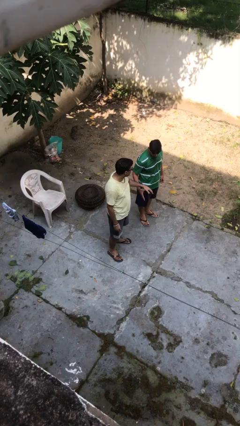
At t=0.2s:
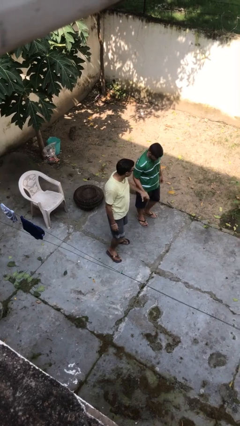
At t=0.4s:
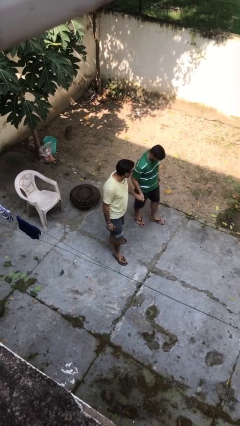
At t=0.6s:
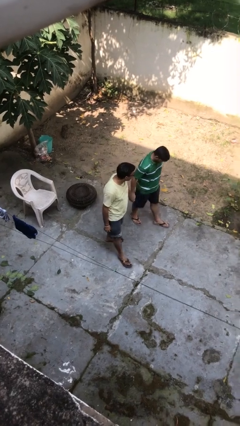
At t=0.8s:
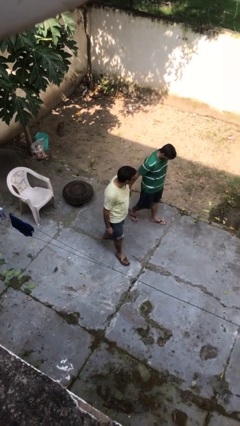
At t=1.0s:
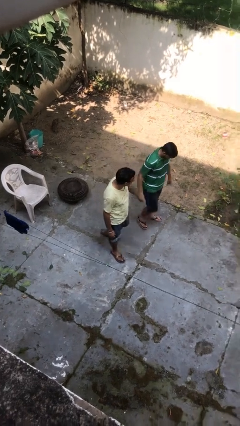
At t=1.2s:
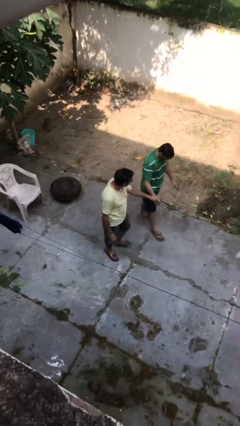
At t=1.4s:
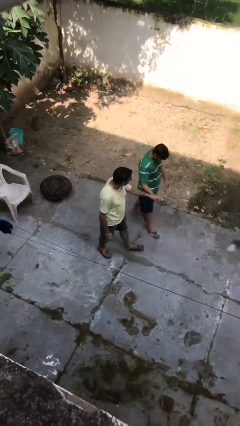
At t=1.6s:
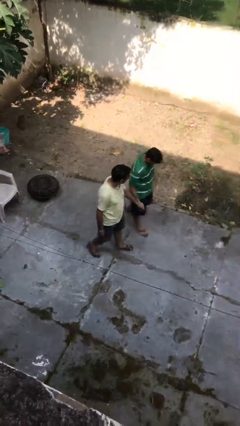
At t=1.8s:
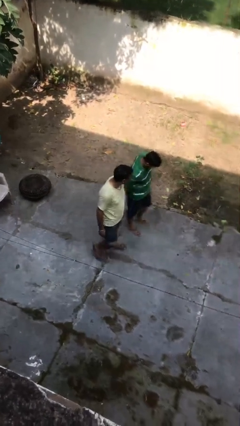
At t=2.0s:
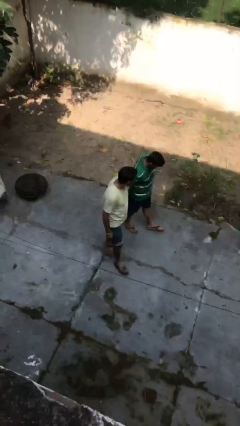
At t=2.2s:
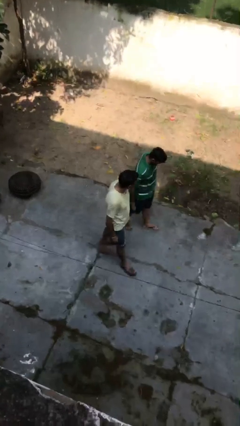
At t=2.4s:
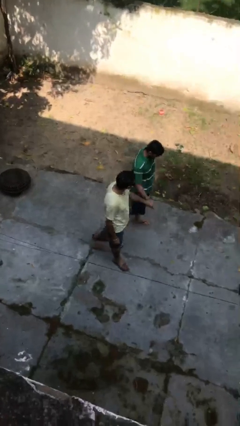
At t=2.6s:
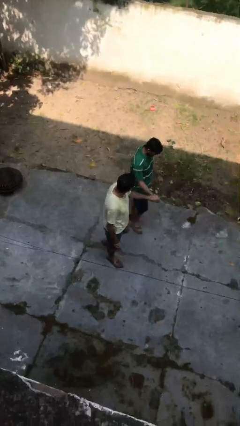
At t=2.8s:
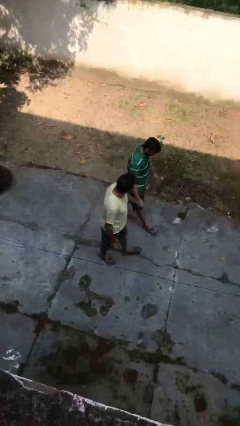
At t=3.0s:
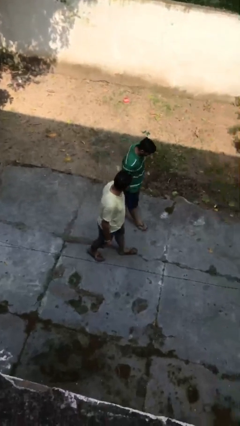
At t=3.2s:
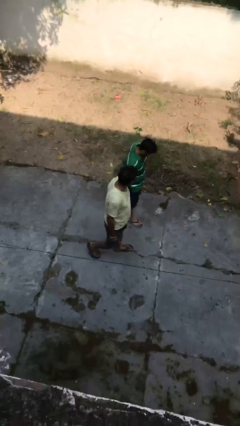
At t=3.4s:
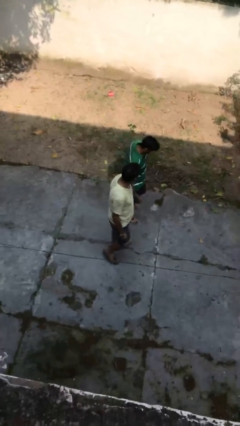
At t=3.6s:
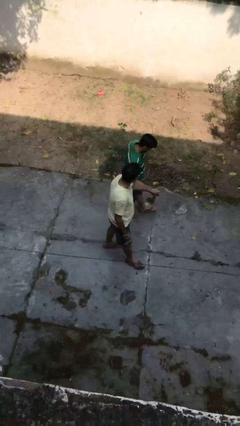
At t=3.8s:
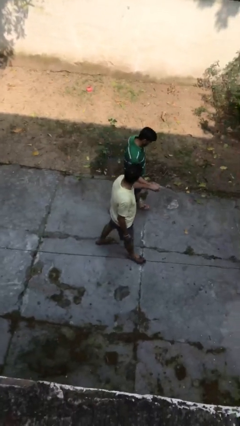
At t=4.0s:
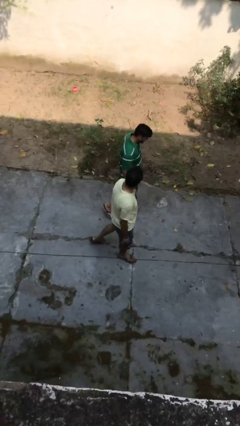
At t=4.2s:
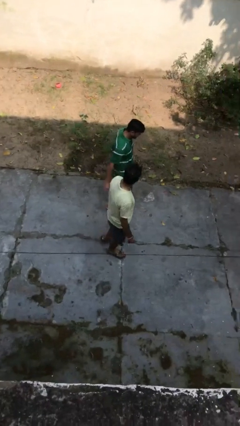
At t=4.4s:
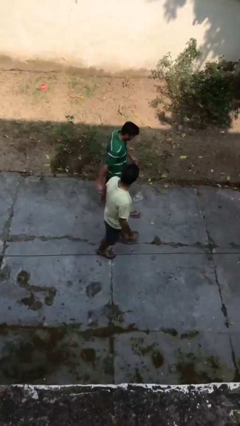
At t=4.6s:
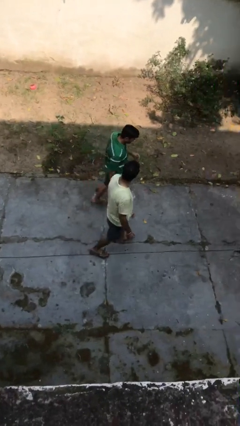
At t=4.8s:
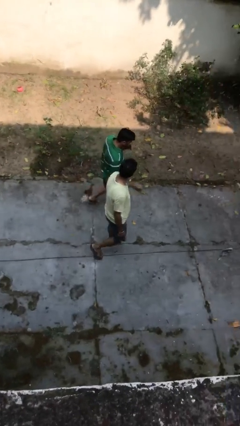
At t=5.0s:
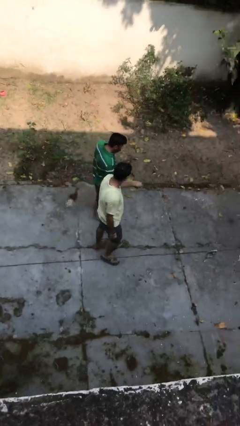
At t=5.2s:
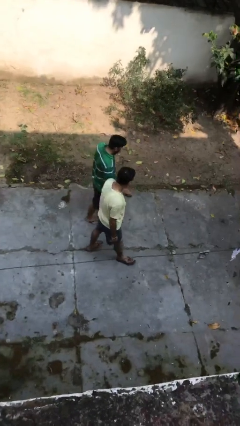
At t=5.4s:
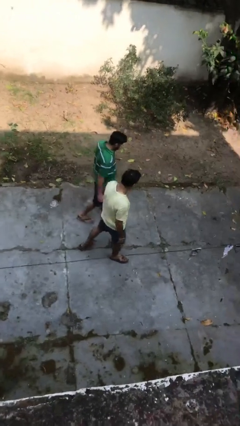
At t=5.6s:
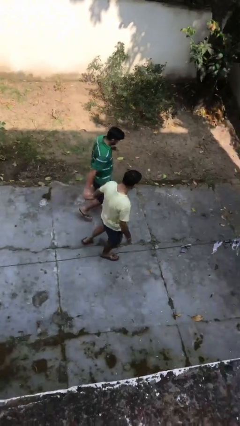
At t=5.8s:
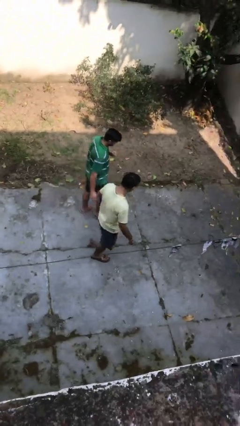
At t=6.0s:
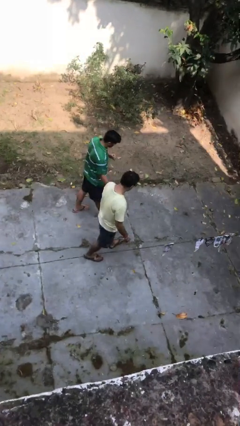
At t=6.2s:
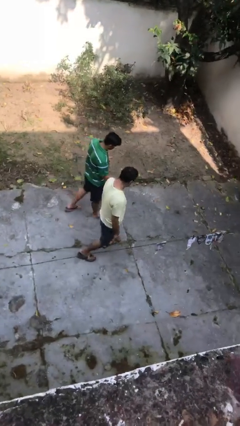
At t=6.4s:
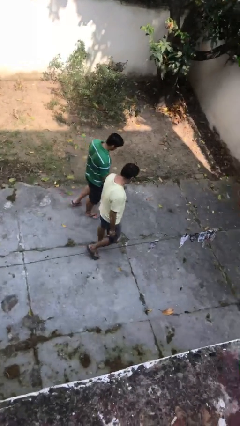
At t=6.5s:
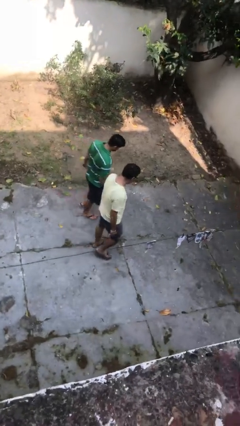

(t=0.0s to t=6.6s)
person holds hand

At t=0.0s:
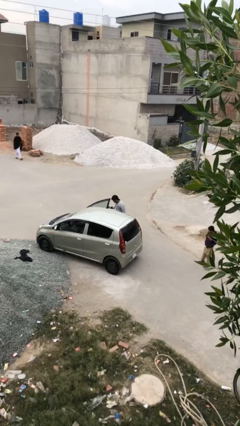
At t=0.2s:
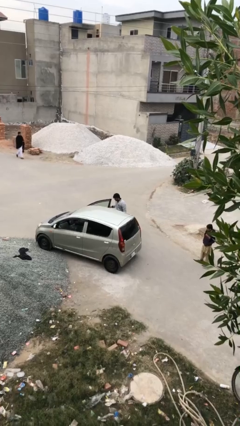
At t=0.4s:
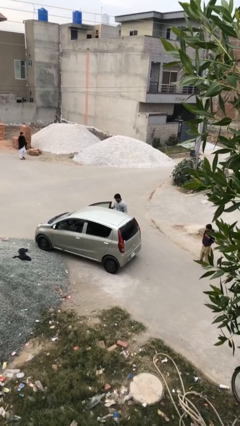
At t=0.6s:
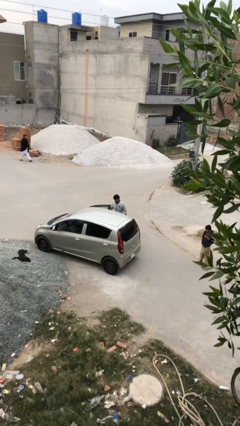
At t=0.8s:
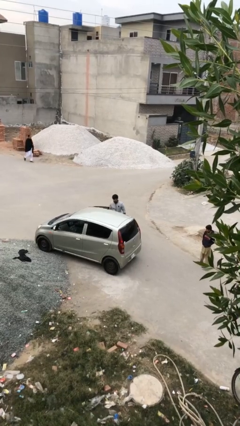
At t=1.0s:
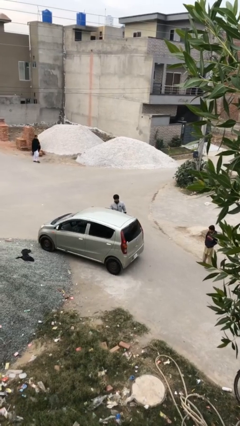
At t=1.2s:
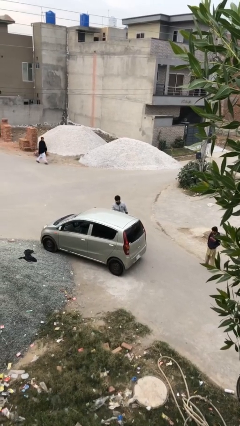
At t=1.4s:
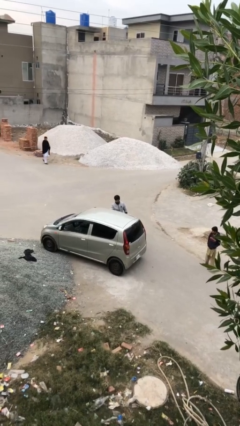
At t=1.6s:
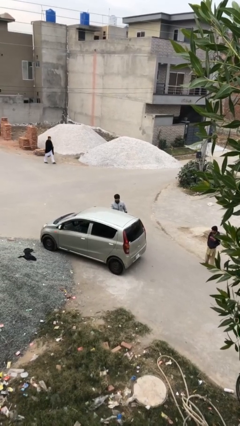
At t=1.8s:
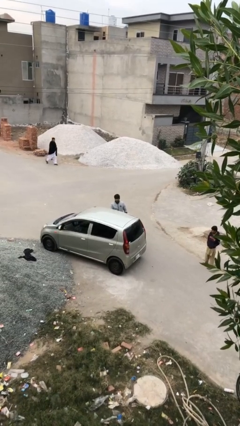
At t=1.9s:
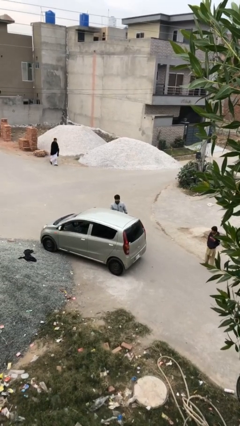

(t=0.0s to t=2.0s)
person closes car door

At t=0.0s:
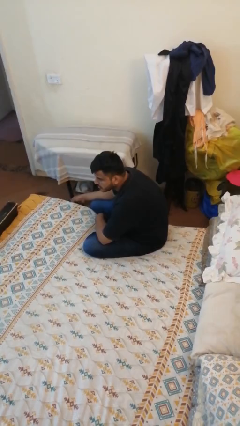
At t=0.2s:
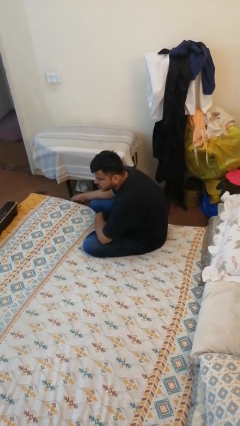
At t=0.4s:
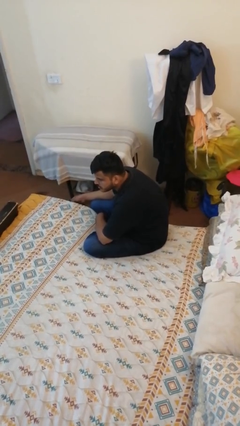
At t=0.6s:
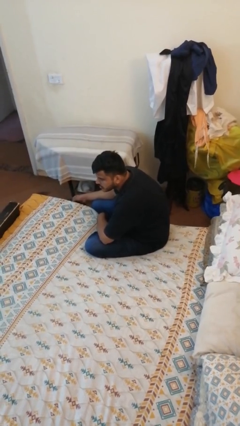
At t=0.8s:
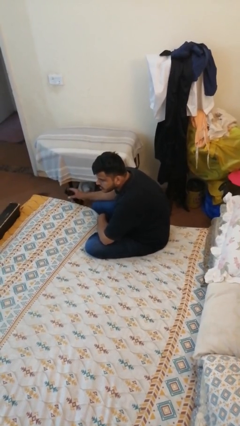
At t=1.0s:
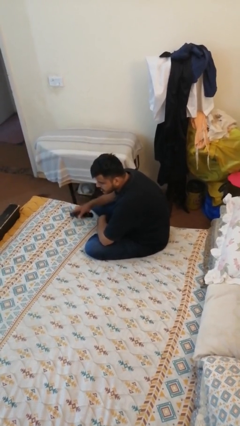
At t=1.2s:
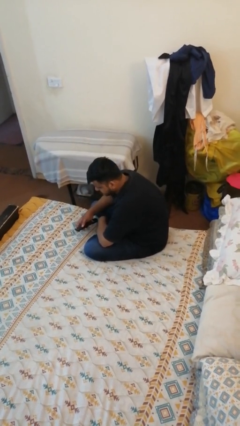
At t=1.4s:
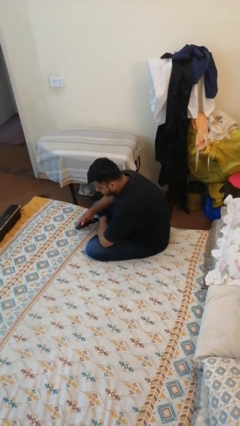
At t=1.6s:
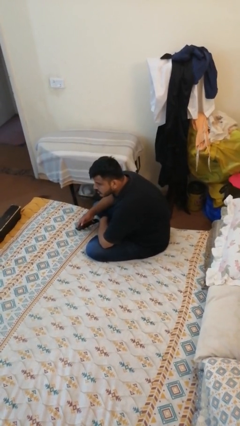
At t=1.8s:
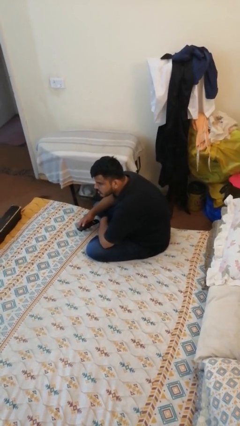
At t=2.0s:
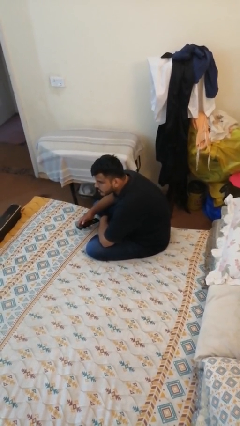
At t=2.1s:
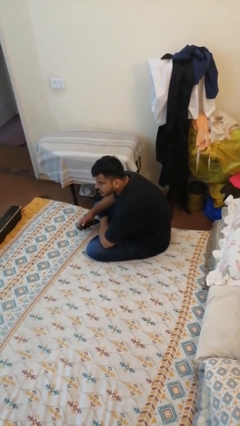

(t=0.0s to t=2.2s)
person uses television remote

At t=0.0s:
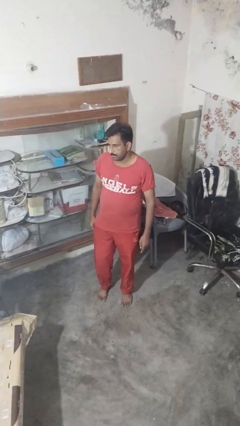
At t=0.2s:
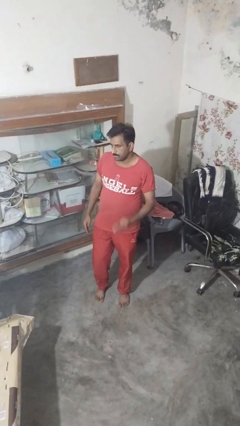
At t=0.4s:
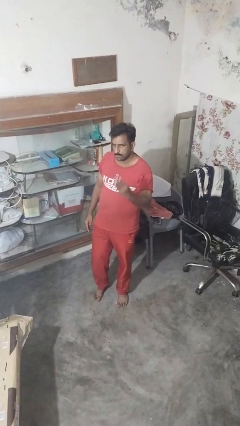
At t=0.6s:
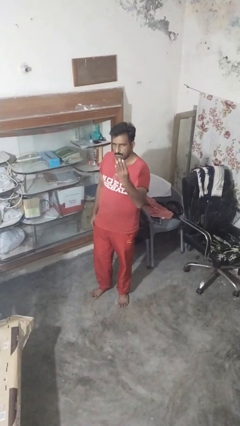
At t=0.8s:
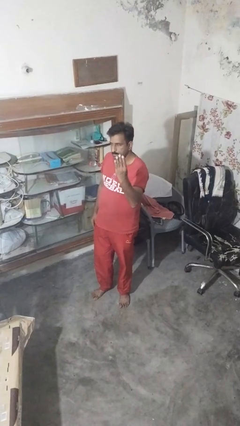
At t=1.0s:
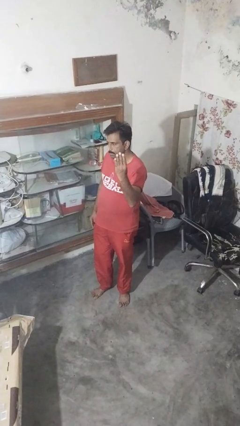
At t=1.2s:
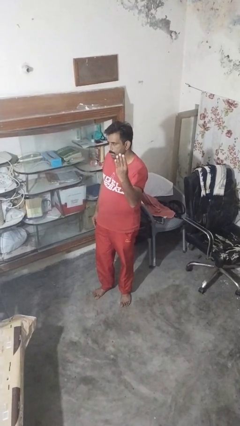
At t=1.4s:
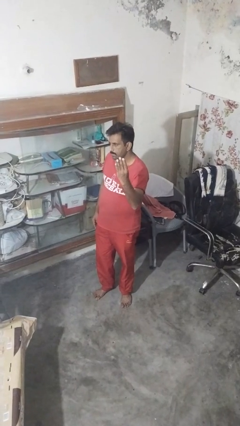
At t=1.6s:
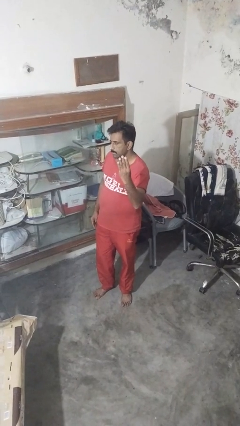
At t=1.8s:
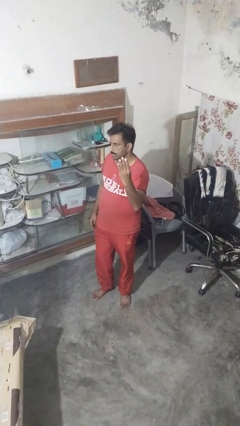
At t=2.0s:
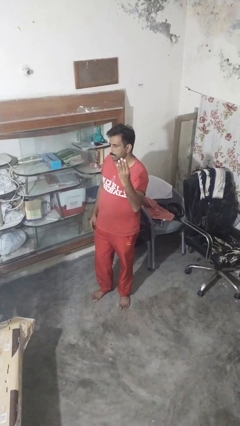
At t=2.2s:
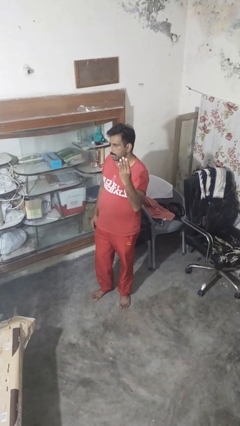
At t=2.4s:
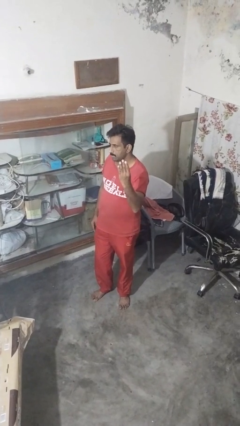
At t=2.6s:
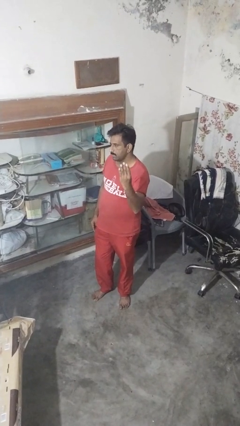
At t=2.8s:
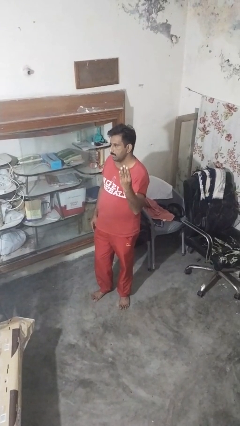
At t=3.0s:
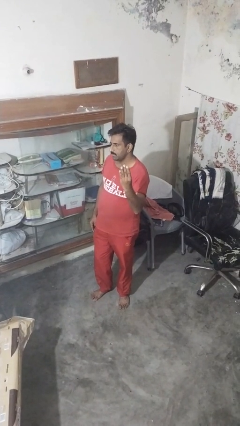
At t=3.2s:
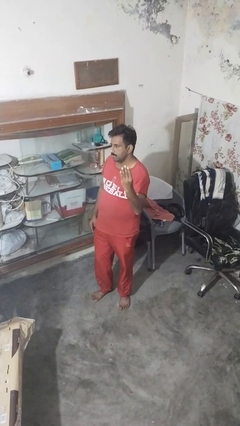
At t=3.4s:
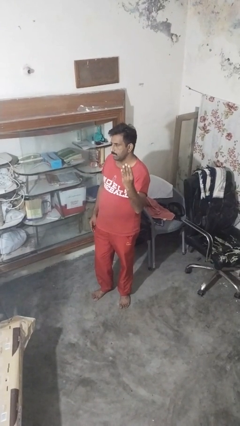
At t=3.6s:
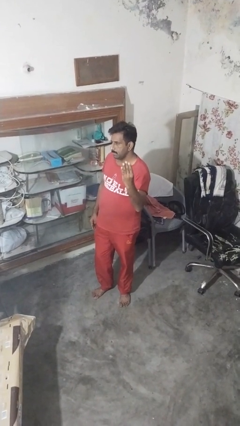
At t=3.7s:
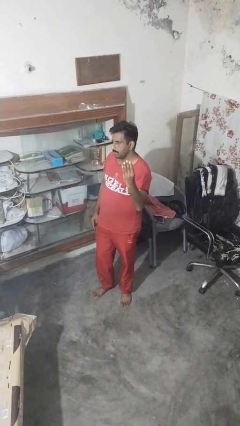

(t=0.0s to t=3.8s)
person gestures number four

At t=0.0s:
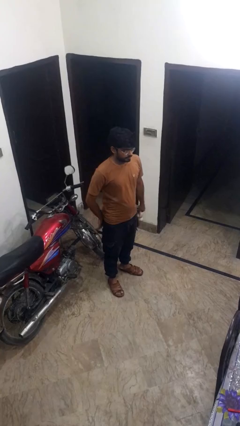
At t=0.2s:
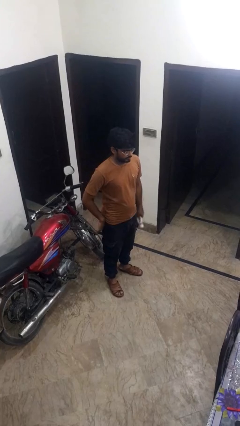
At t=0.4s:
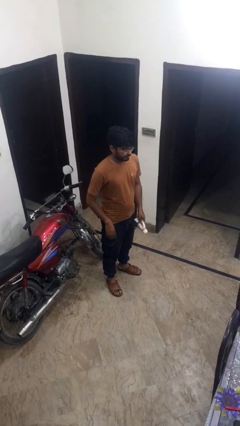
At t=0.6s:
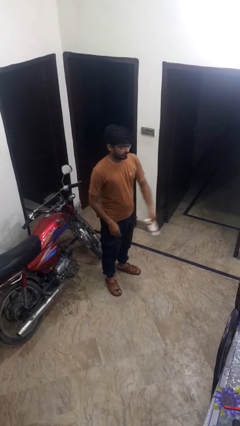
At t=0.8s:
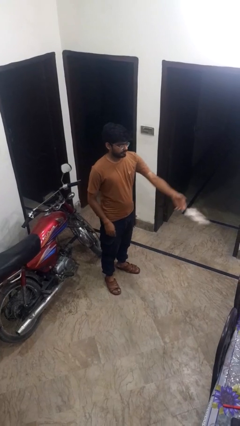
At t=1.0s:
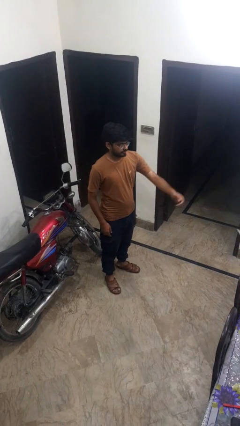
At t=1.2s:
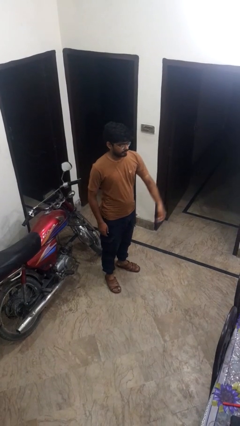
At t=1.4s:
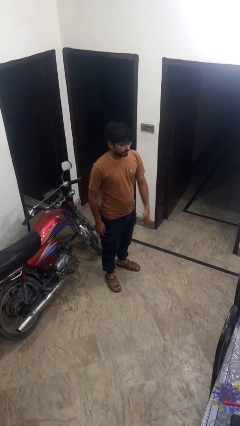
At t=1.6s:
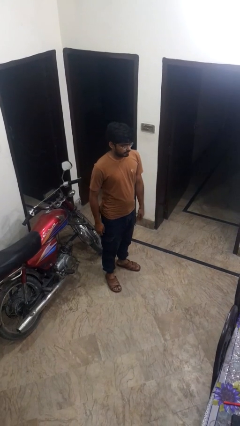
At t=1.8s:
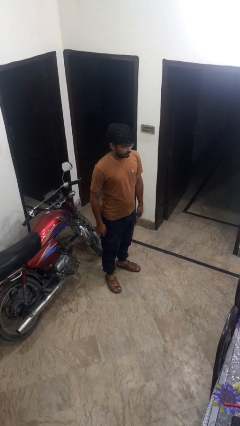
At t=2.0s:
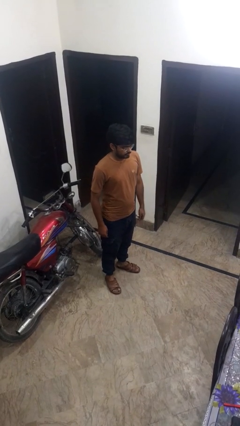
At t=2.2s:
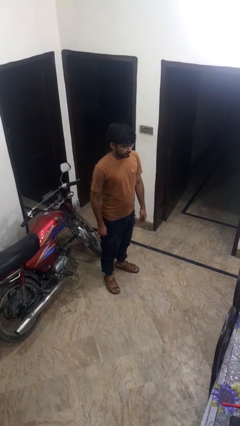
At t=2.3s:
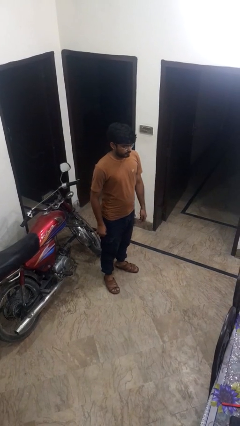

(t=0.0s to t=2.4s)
person throws object on table
